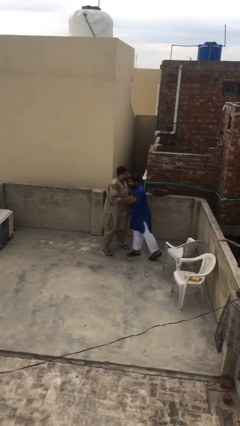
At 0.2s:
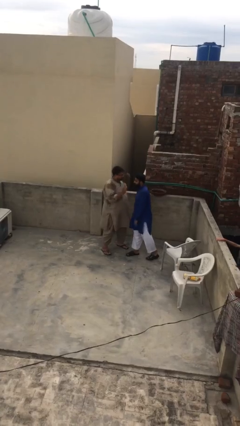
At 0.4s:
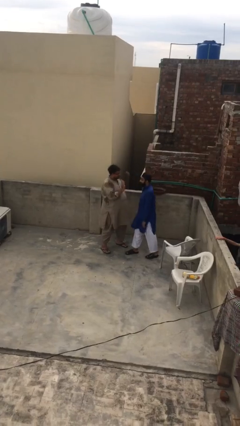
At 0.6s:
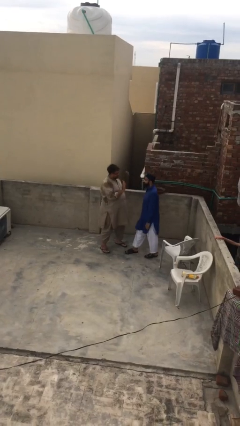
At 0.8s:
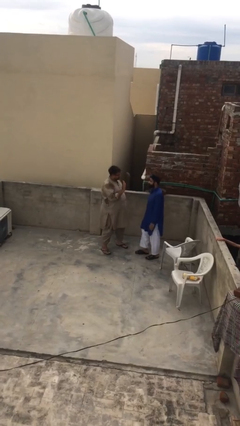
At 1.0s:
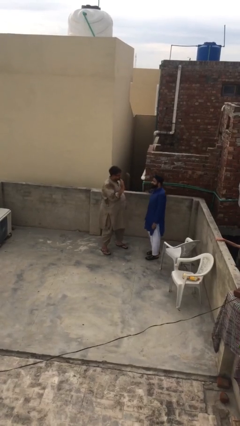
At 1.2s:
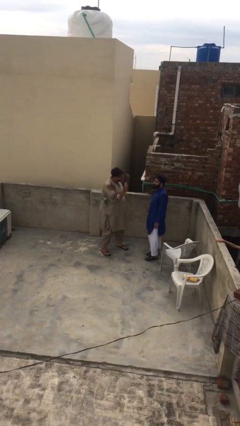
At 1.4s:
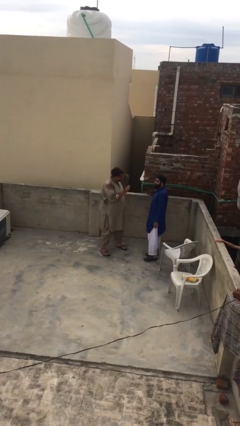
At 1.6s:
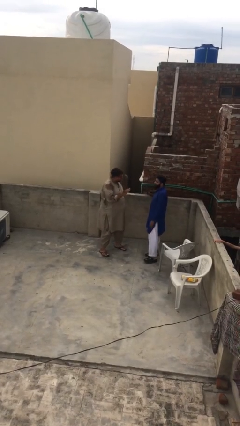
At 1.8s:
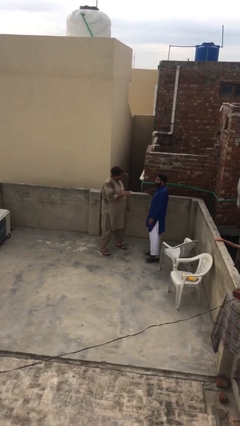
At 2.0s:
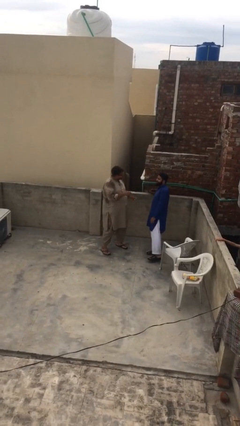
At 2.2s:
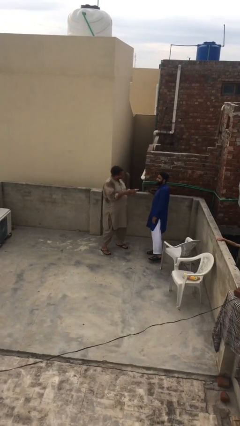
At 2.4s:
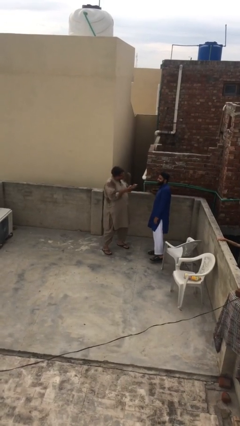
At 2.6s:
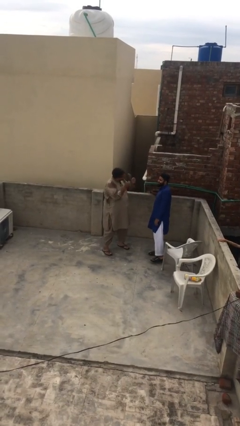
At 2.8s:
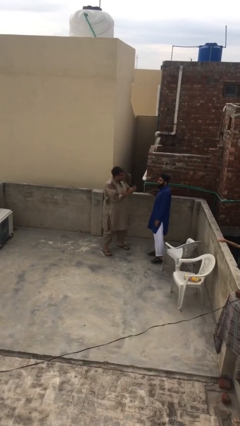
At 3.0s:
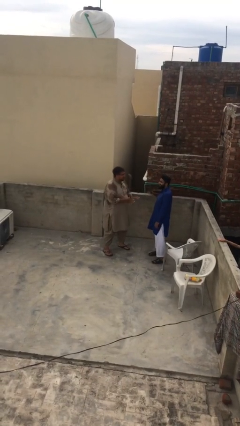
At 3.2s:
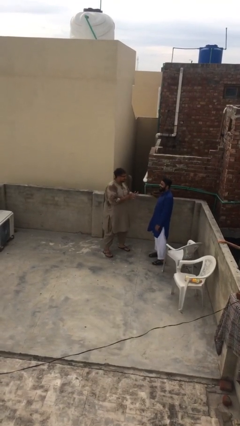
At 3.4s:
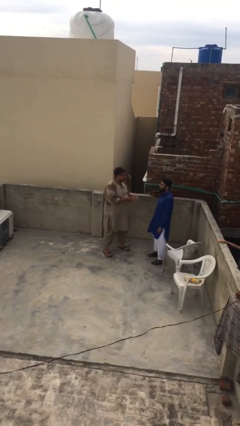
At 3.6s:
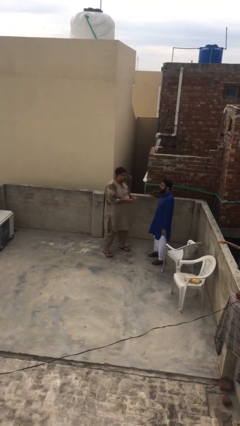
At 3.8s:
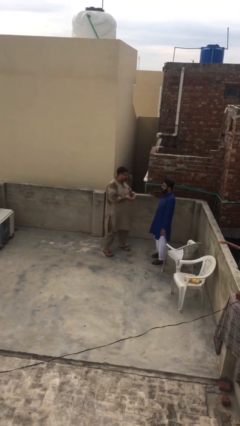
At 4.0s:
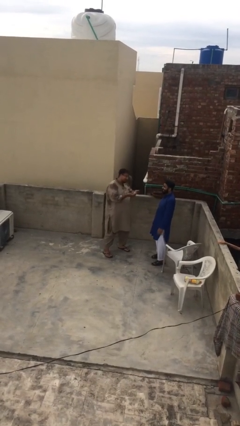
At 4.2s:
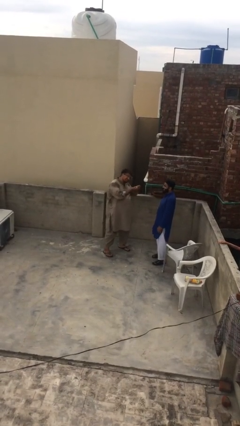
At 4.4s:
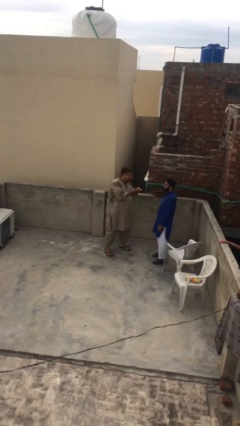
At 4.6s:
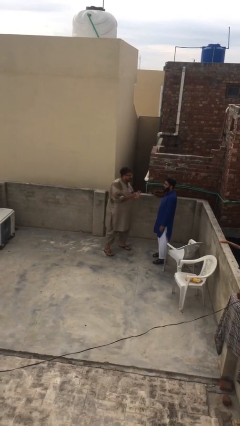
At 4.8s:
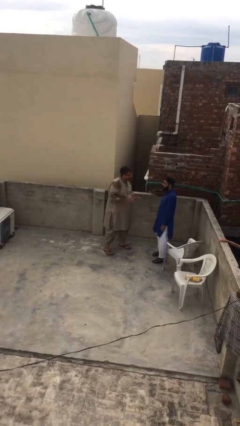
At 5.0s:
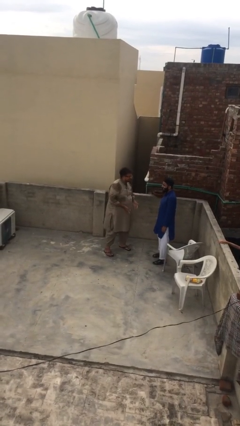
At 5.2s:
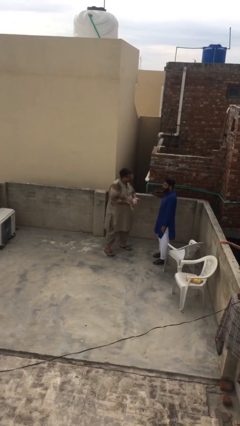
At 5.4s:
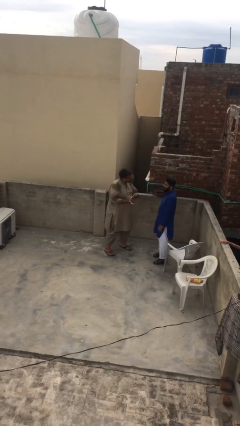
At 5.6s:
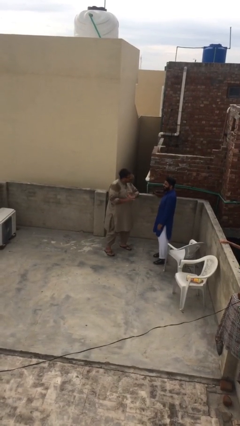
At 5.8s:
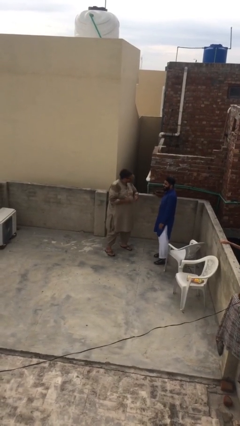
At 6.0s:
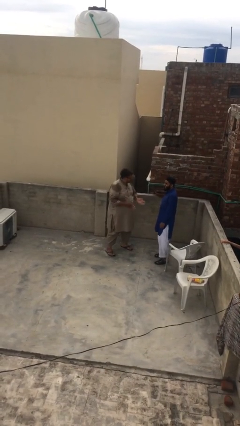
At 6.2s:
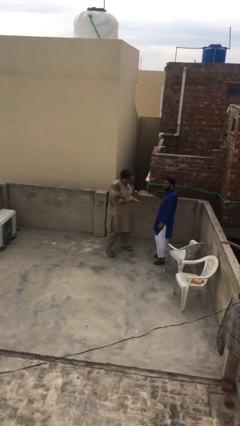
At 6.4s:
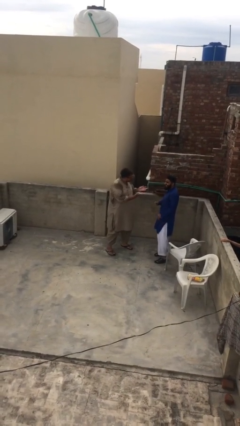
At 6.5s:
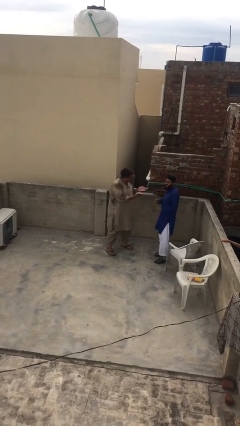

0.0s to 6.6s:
person talks to person

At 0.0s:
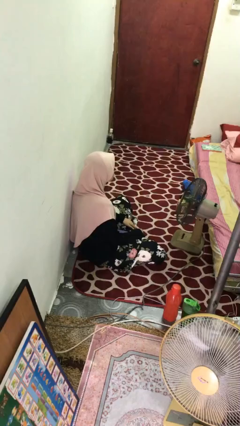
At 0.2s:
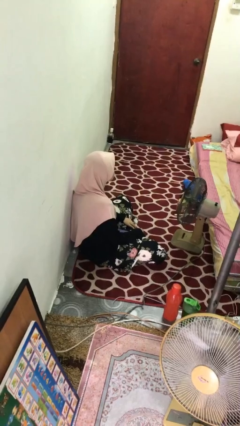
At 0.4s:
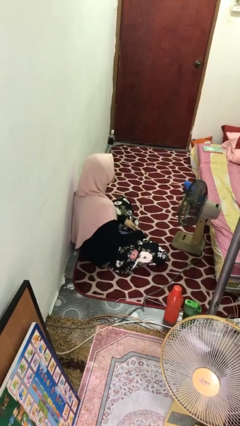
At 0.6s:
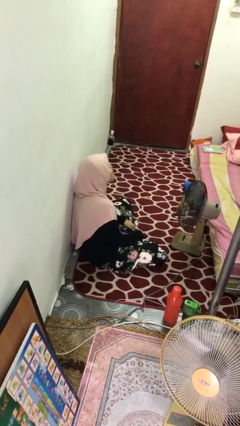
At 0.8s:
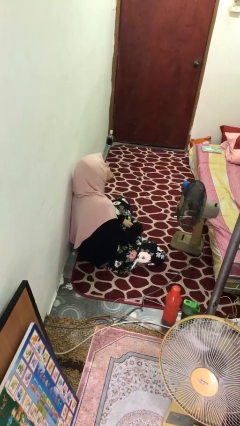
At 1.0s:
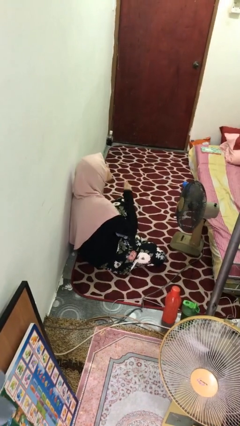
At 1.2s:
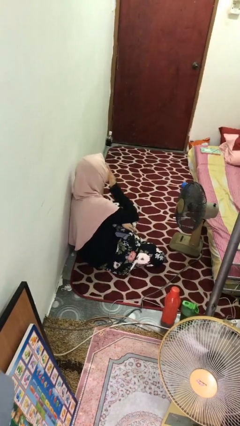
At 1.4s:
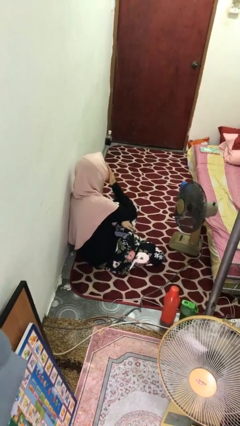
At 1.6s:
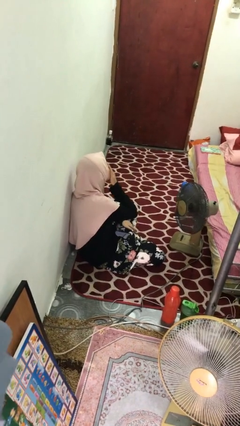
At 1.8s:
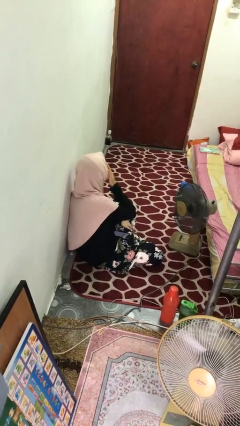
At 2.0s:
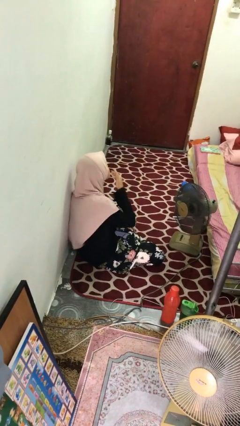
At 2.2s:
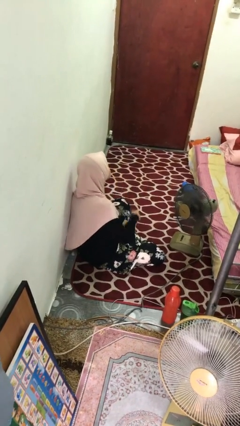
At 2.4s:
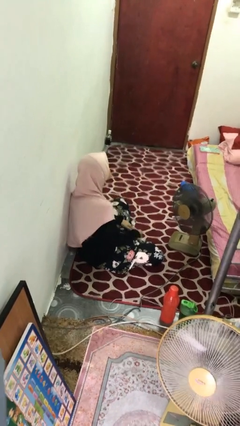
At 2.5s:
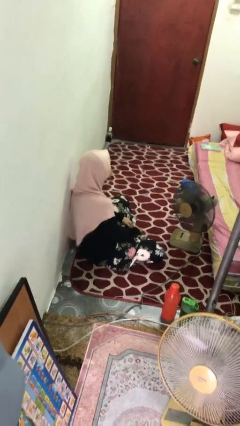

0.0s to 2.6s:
person yawns

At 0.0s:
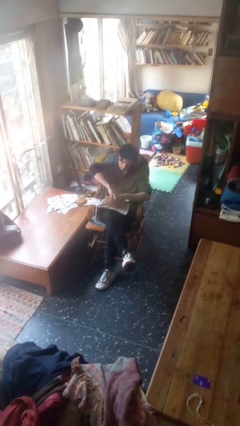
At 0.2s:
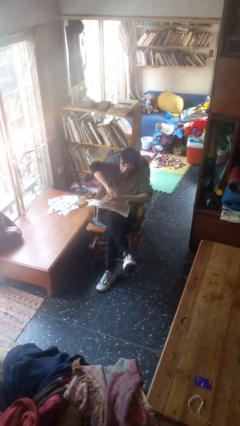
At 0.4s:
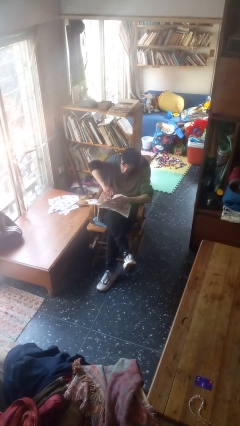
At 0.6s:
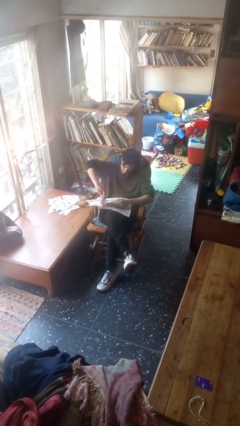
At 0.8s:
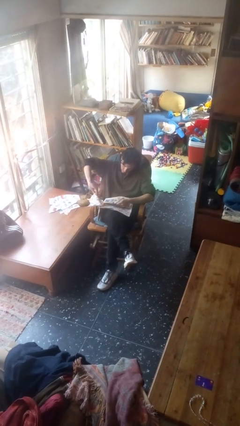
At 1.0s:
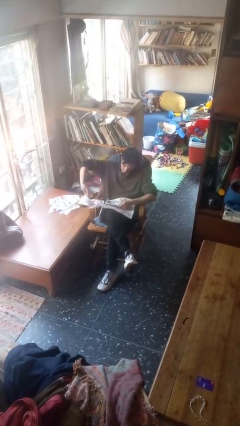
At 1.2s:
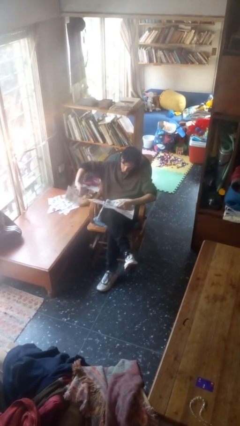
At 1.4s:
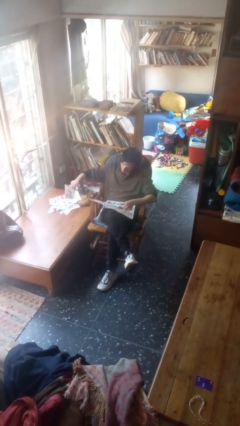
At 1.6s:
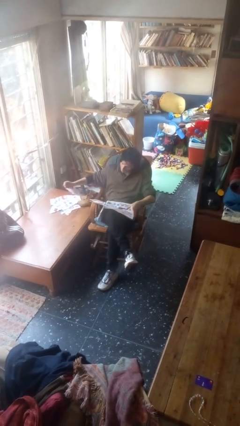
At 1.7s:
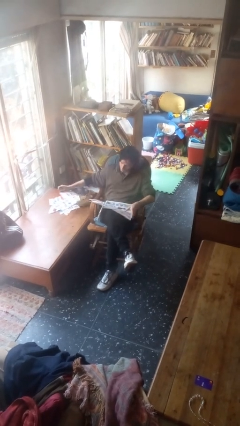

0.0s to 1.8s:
person tears paper

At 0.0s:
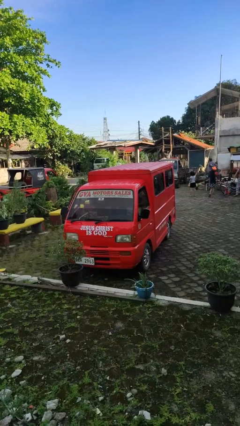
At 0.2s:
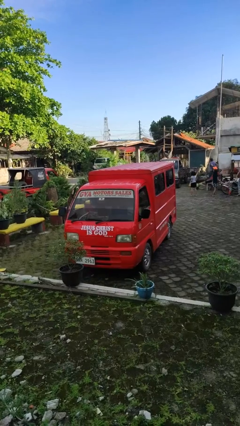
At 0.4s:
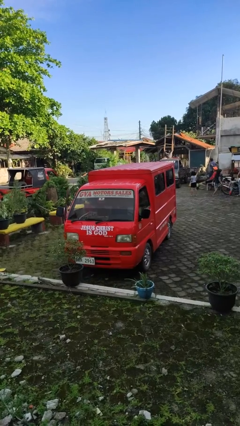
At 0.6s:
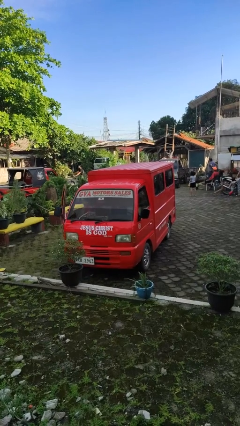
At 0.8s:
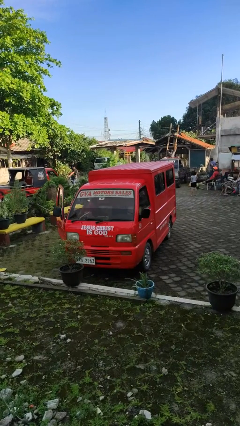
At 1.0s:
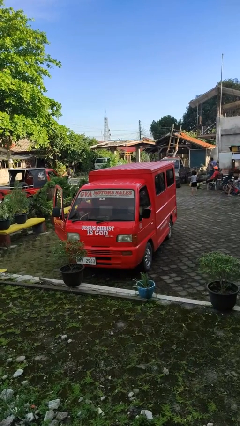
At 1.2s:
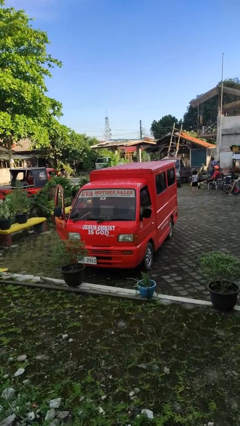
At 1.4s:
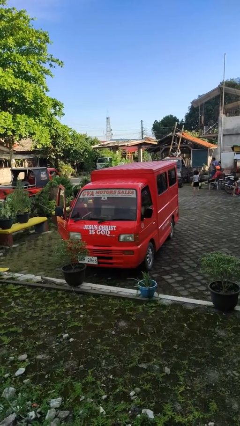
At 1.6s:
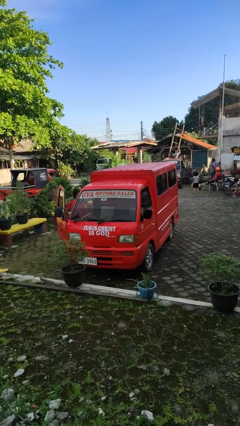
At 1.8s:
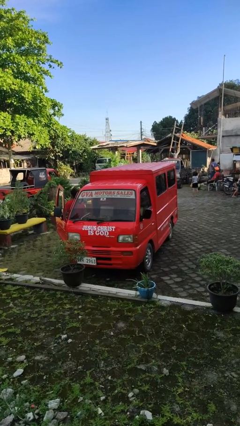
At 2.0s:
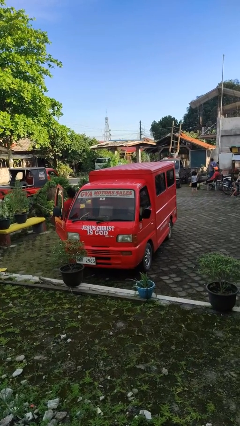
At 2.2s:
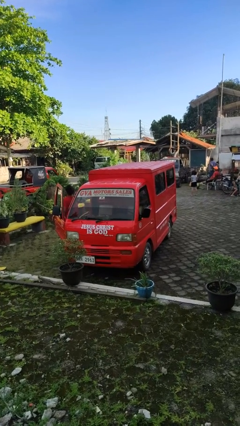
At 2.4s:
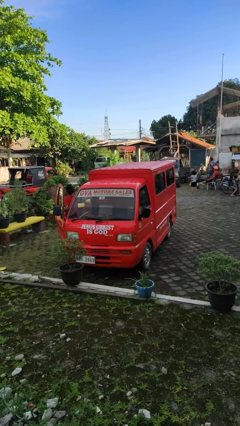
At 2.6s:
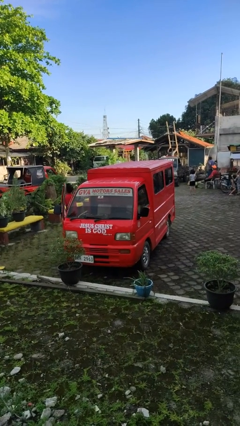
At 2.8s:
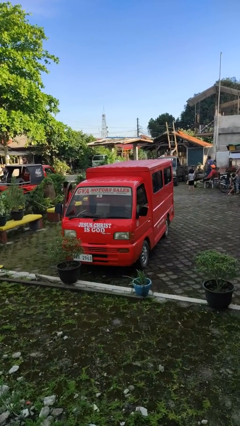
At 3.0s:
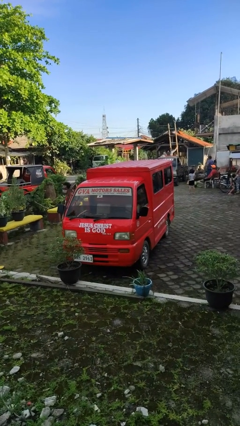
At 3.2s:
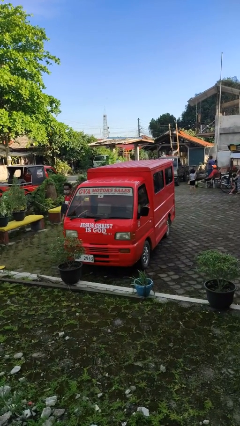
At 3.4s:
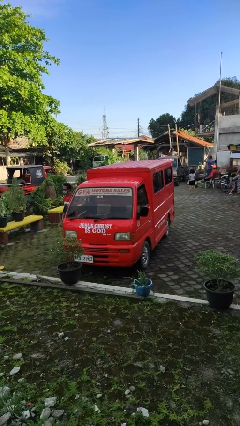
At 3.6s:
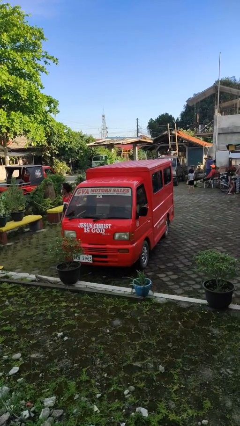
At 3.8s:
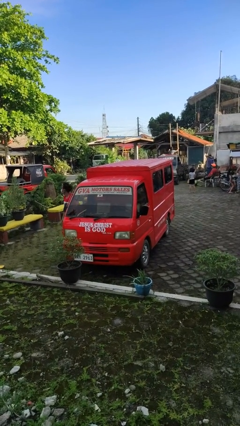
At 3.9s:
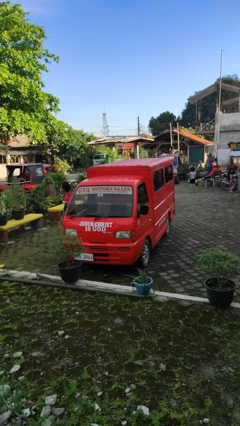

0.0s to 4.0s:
car drops off person

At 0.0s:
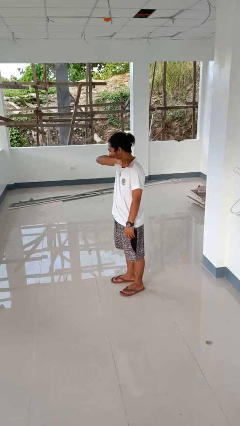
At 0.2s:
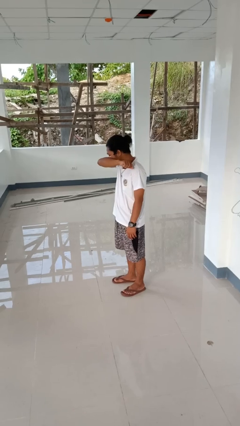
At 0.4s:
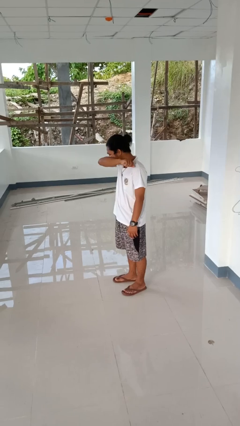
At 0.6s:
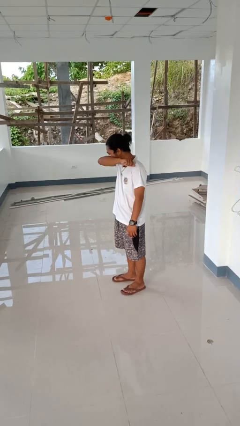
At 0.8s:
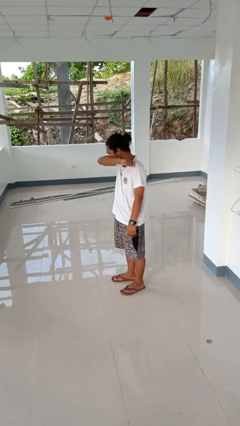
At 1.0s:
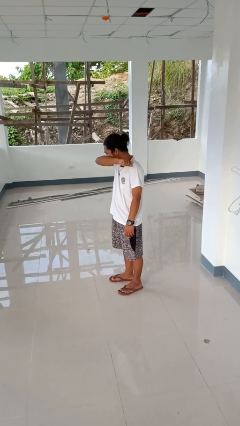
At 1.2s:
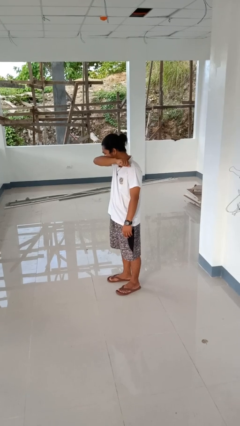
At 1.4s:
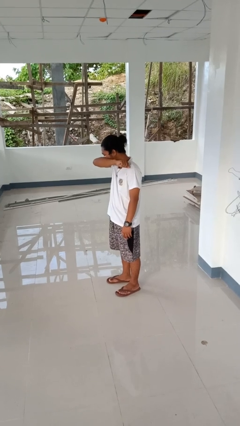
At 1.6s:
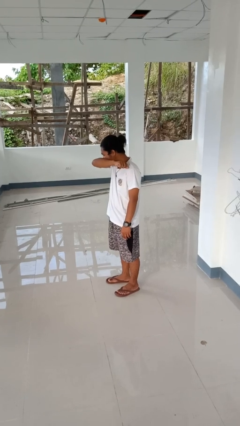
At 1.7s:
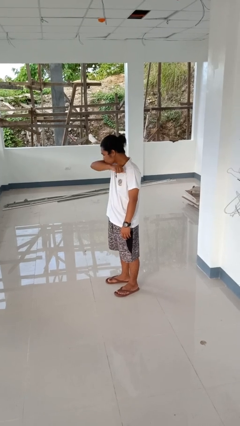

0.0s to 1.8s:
person sneezes into arm

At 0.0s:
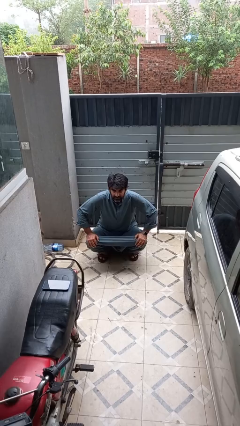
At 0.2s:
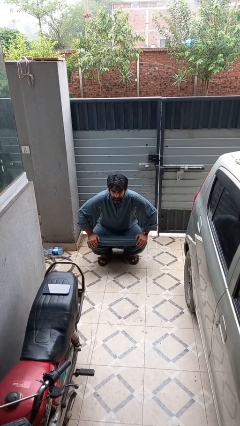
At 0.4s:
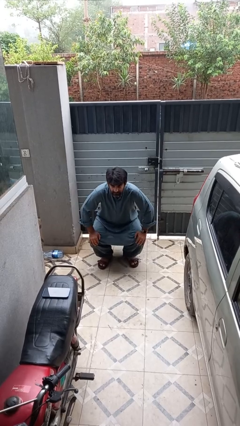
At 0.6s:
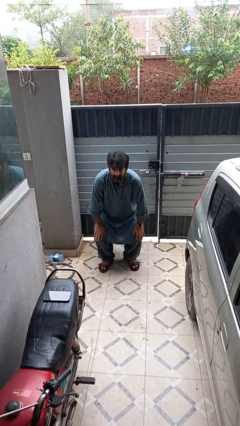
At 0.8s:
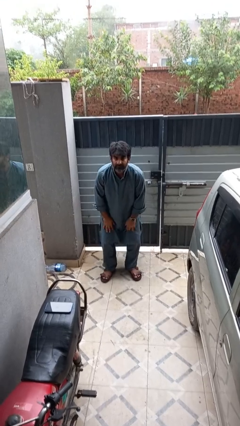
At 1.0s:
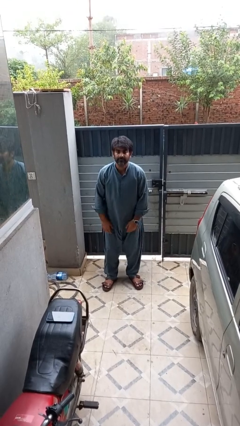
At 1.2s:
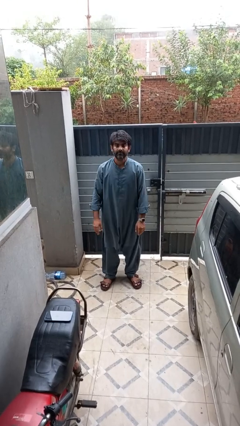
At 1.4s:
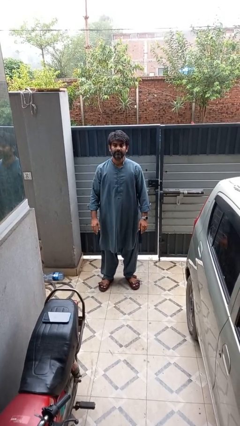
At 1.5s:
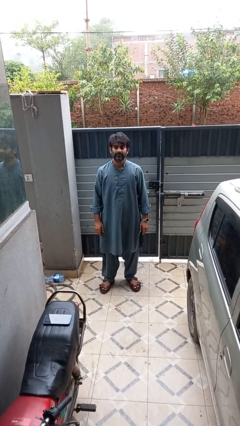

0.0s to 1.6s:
person stands up
